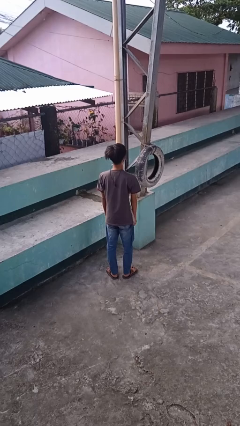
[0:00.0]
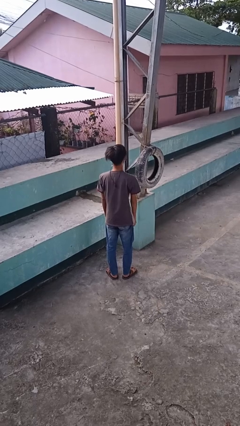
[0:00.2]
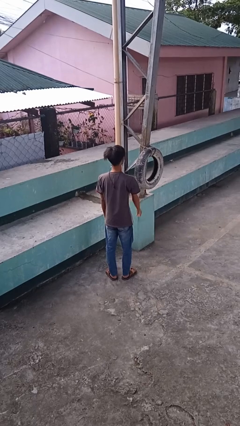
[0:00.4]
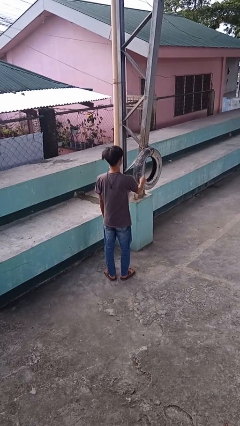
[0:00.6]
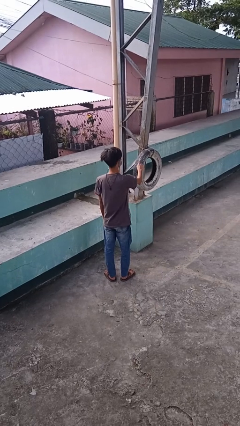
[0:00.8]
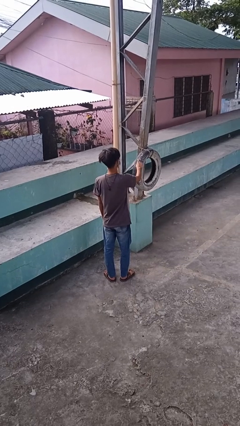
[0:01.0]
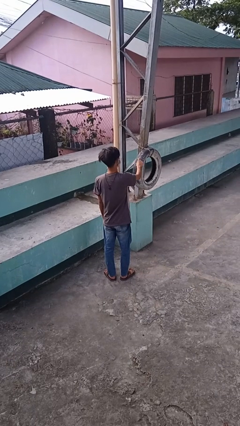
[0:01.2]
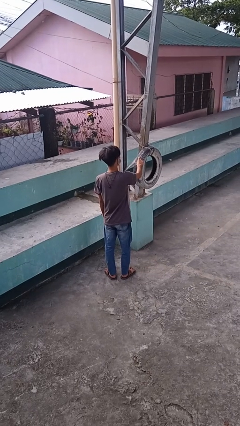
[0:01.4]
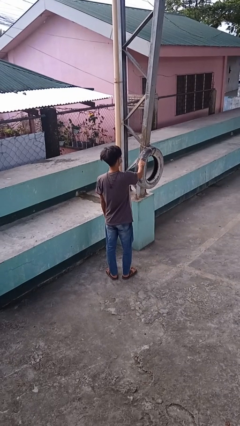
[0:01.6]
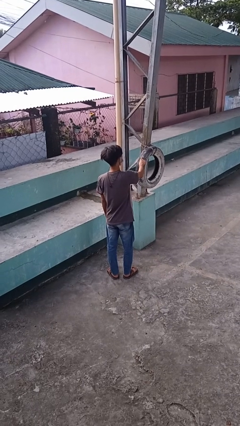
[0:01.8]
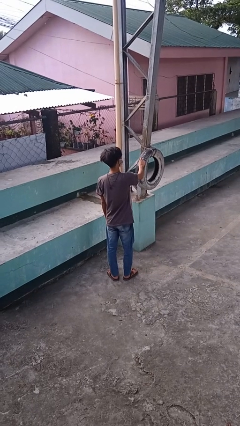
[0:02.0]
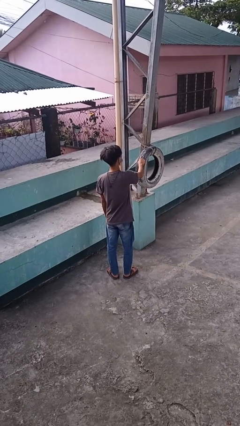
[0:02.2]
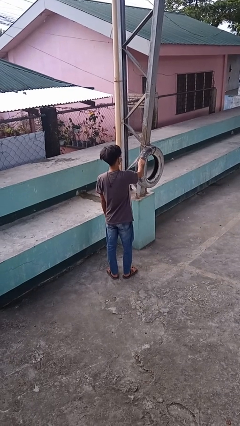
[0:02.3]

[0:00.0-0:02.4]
person taps object with finger

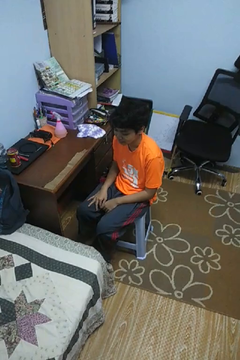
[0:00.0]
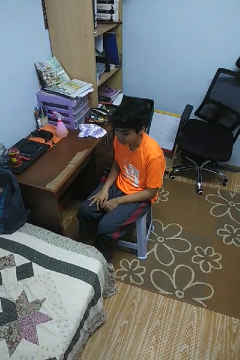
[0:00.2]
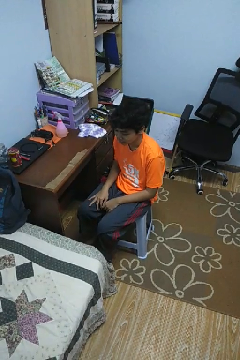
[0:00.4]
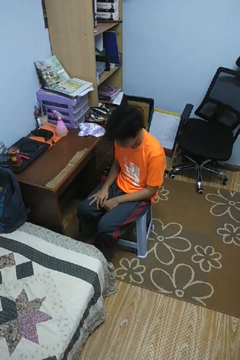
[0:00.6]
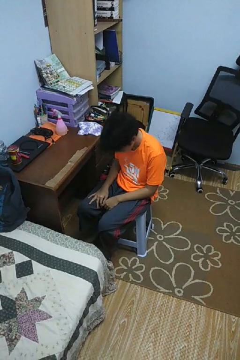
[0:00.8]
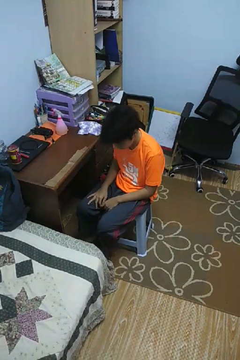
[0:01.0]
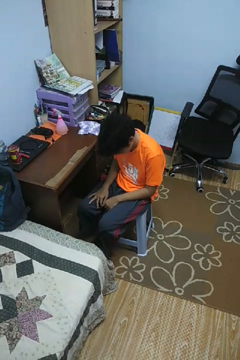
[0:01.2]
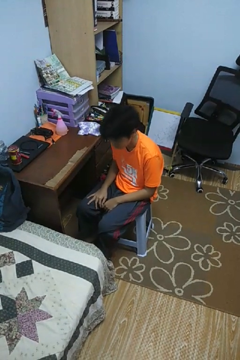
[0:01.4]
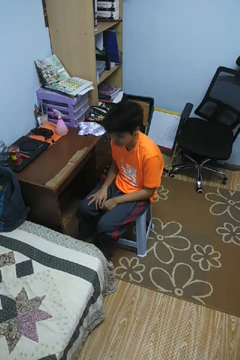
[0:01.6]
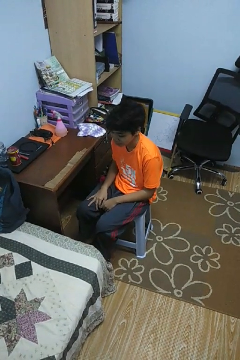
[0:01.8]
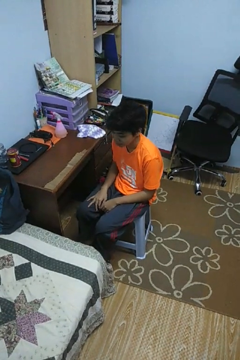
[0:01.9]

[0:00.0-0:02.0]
person nods head

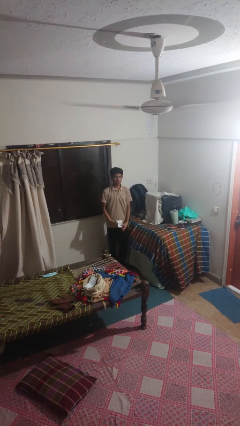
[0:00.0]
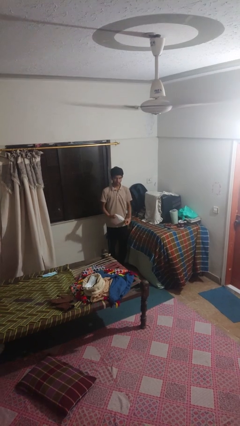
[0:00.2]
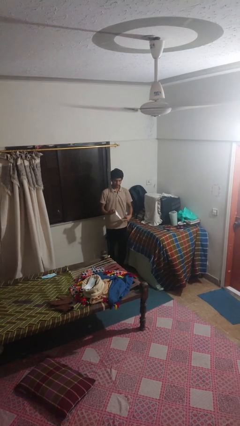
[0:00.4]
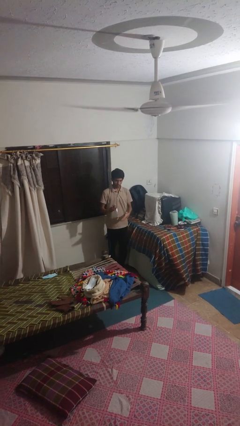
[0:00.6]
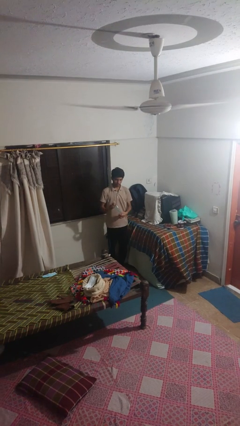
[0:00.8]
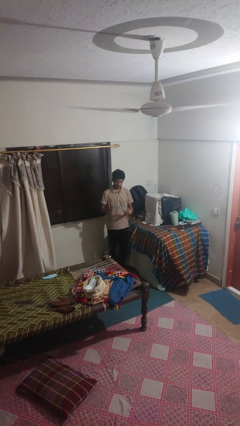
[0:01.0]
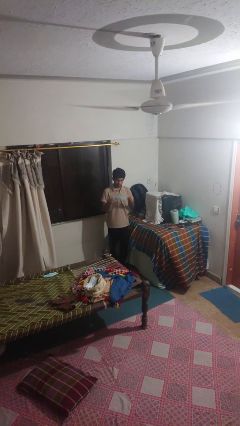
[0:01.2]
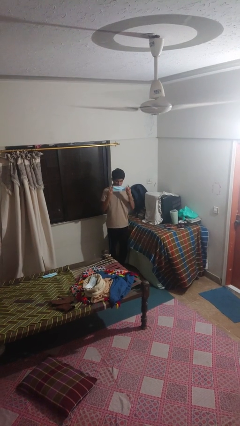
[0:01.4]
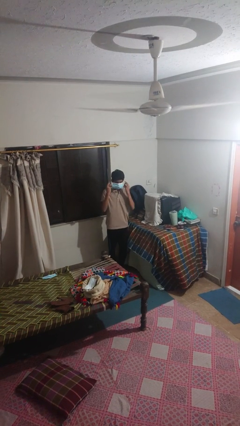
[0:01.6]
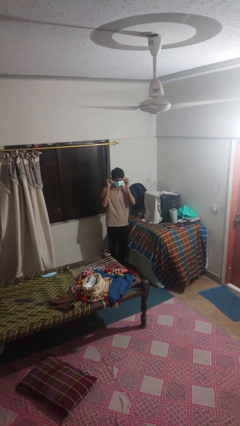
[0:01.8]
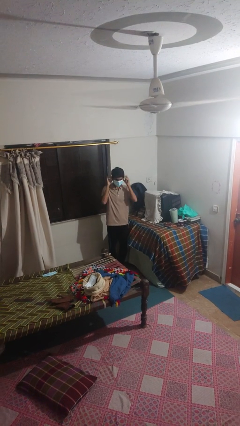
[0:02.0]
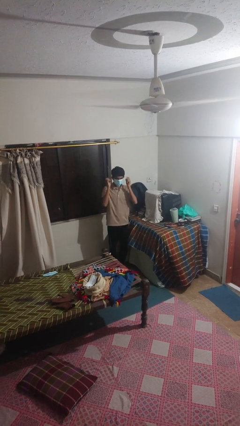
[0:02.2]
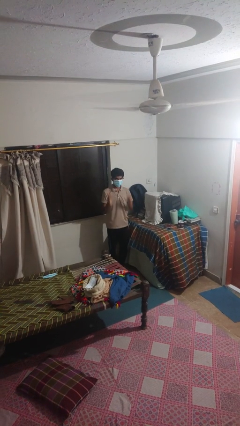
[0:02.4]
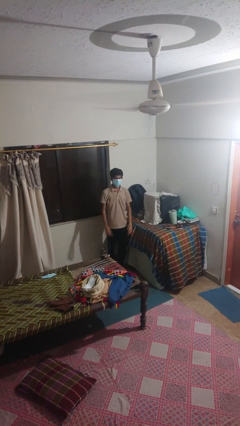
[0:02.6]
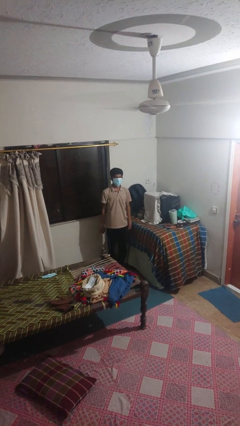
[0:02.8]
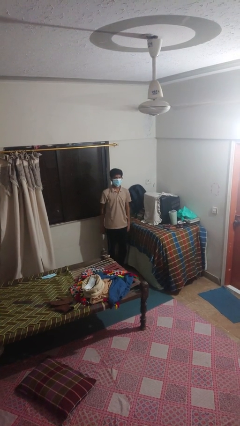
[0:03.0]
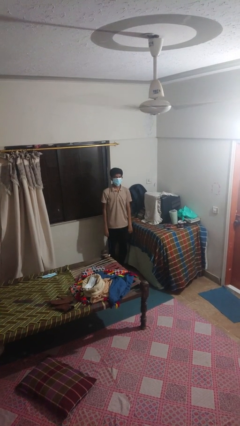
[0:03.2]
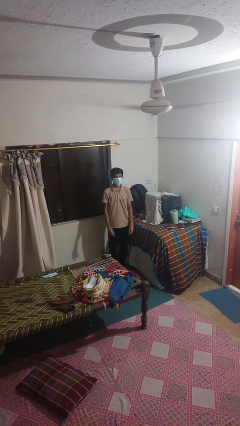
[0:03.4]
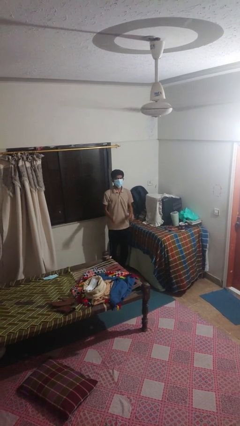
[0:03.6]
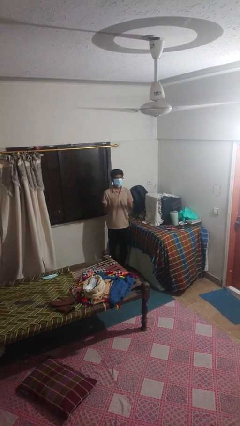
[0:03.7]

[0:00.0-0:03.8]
person puts on facemask

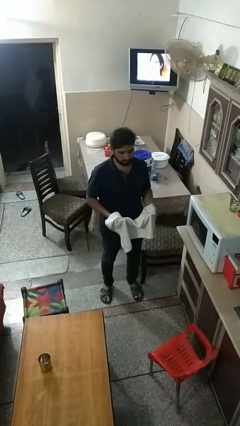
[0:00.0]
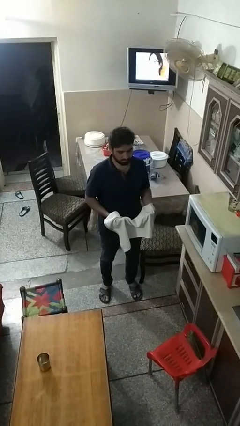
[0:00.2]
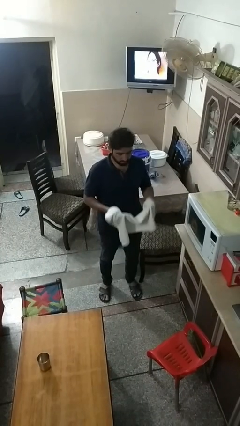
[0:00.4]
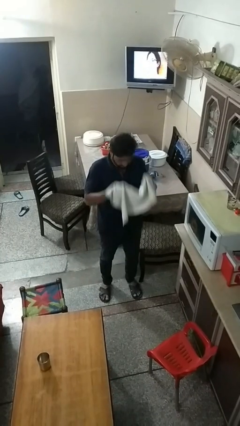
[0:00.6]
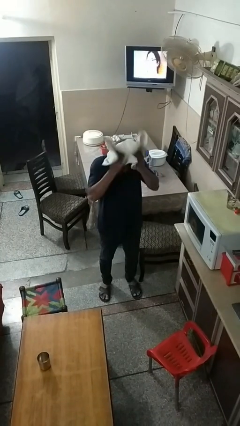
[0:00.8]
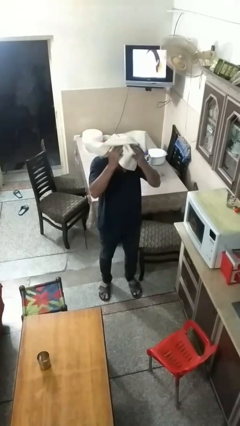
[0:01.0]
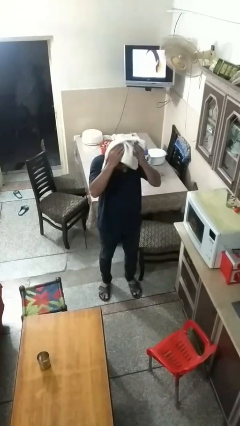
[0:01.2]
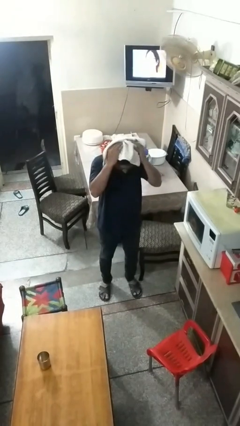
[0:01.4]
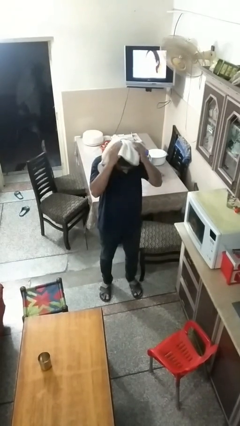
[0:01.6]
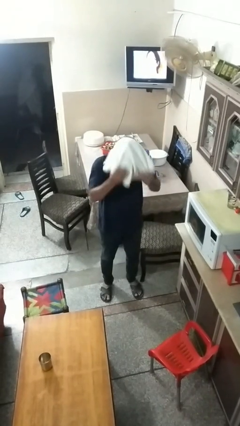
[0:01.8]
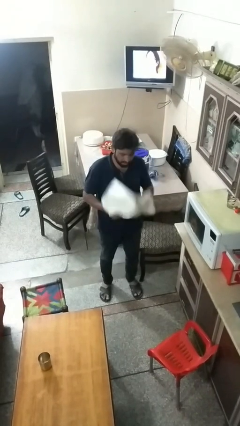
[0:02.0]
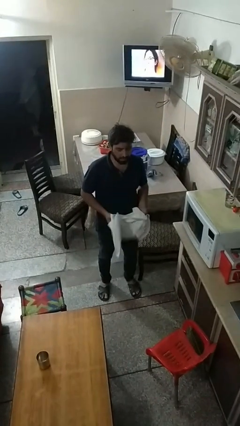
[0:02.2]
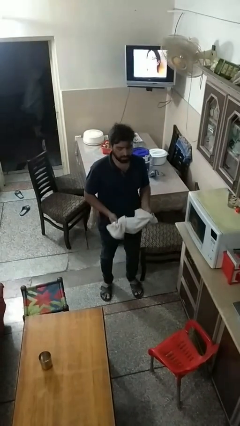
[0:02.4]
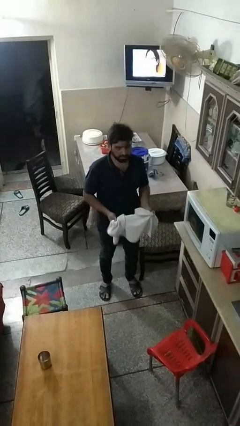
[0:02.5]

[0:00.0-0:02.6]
person dries hair with towel

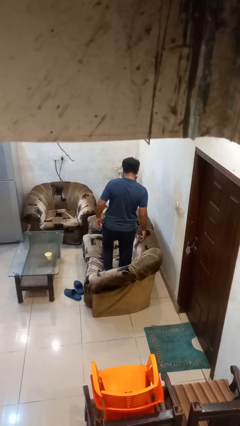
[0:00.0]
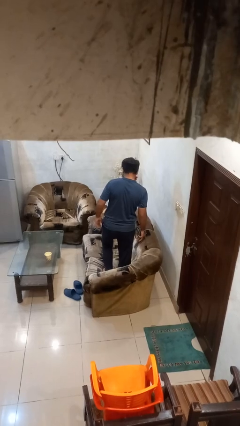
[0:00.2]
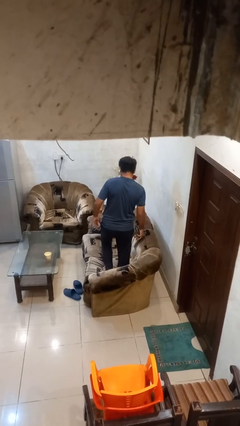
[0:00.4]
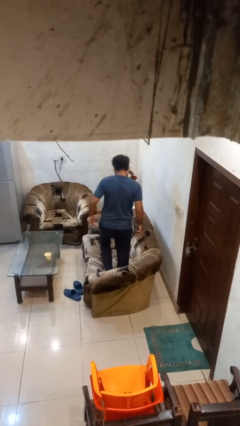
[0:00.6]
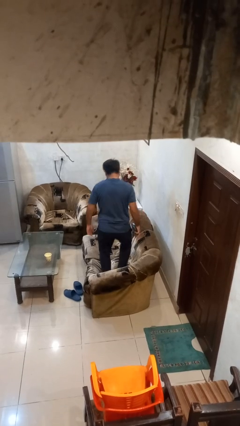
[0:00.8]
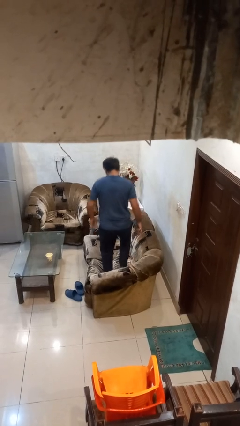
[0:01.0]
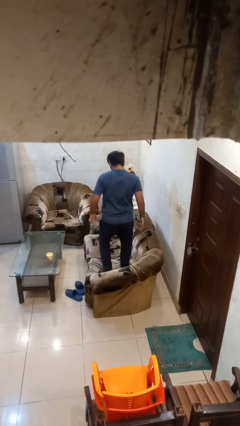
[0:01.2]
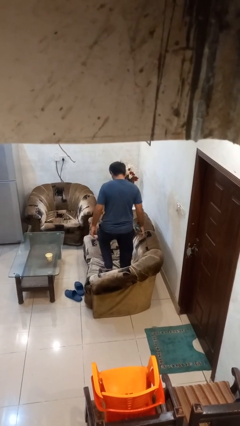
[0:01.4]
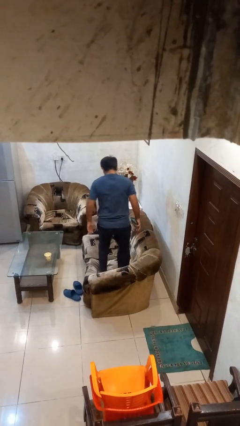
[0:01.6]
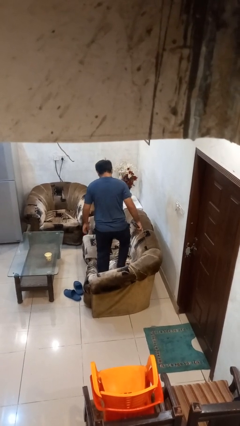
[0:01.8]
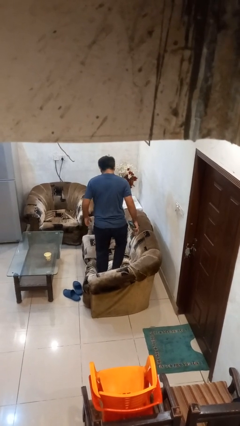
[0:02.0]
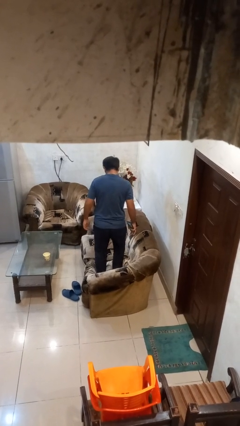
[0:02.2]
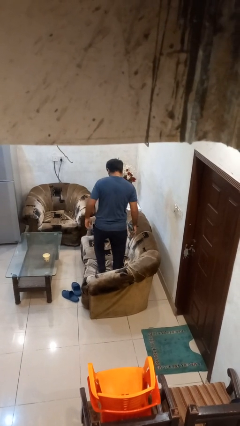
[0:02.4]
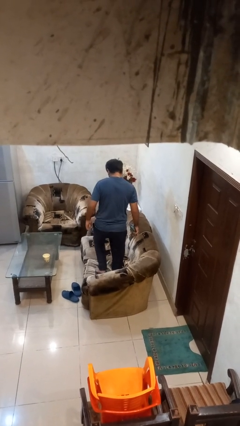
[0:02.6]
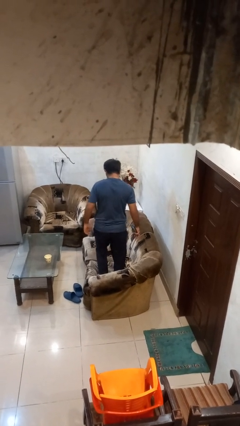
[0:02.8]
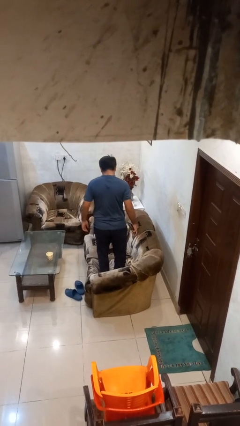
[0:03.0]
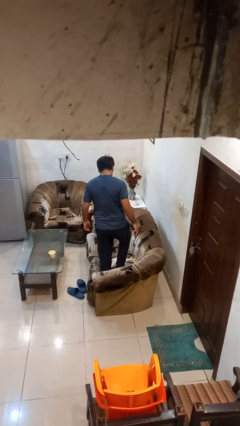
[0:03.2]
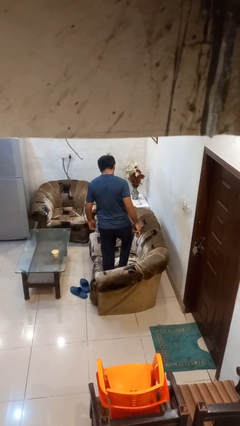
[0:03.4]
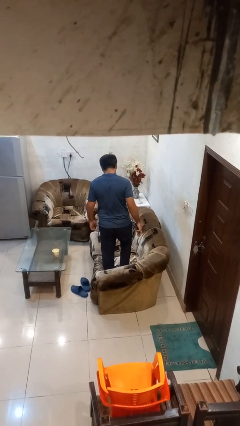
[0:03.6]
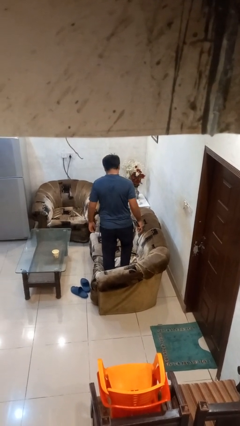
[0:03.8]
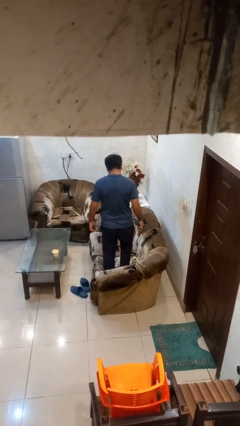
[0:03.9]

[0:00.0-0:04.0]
person jumps on couch

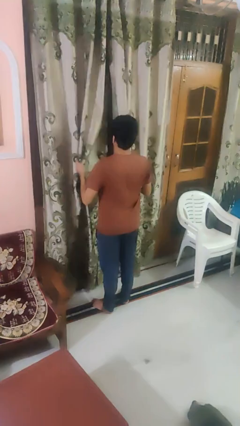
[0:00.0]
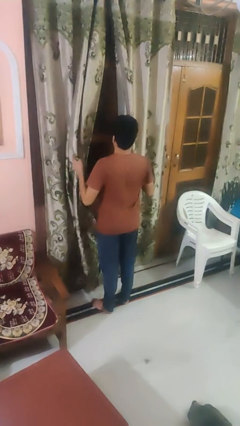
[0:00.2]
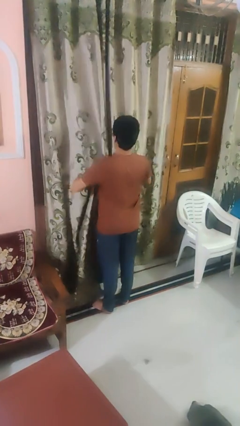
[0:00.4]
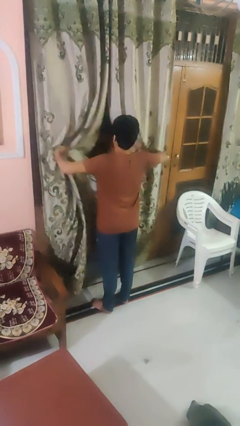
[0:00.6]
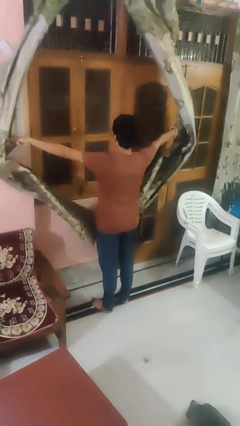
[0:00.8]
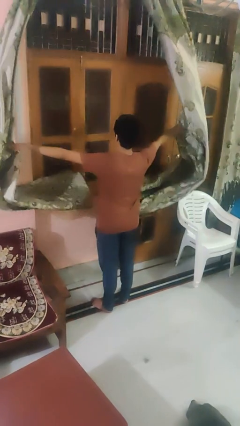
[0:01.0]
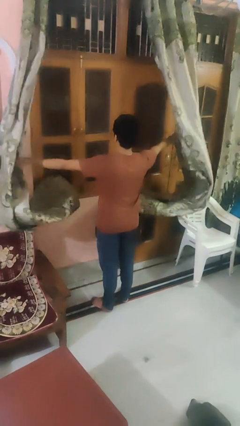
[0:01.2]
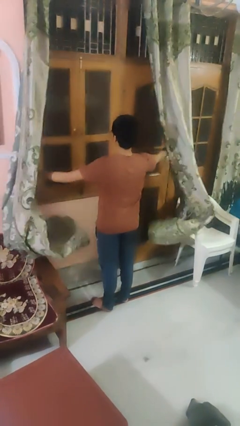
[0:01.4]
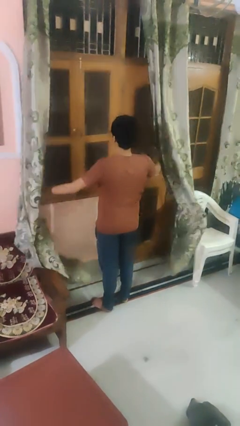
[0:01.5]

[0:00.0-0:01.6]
person opens curtains

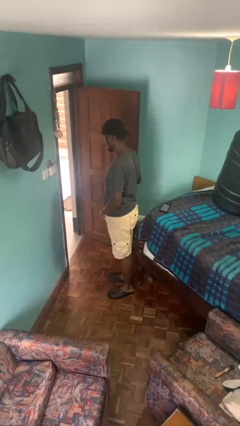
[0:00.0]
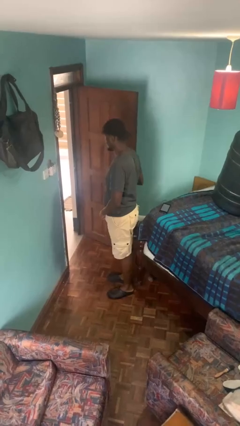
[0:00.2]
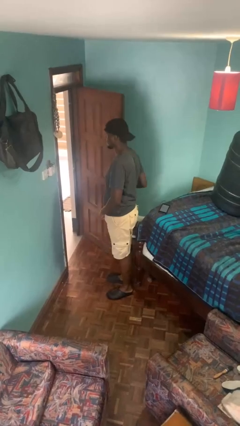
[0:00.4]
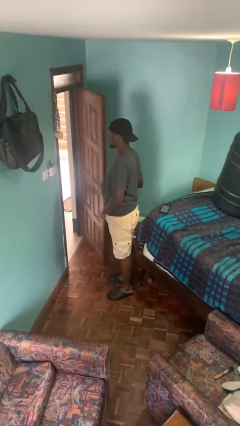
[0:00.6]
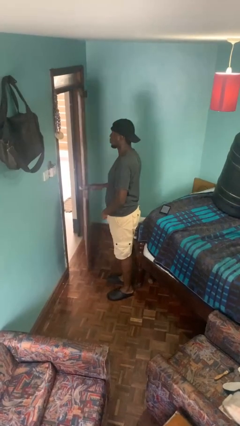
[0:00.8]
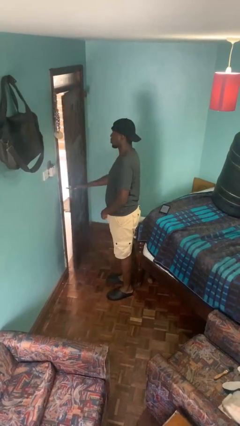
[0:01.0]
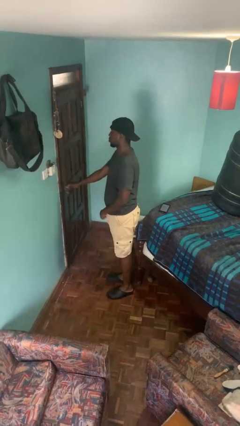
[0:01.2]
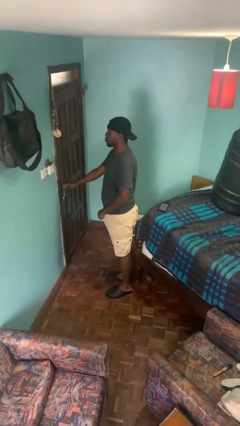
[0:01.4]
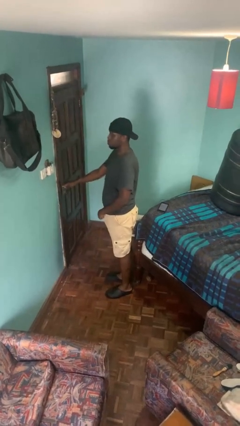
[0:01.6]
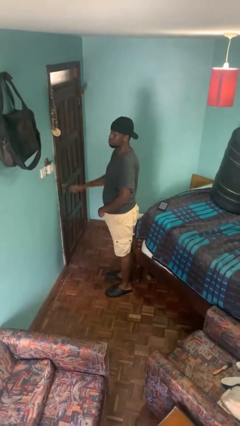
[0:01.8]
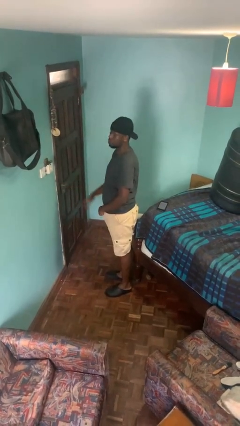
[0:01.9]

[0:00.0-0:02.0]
person closes facility door
